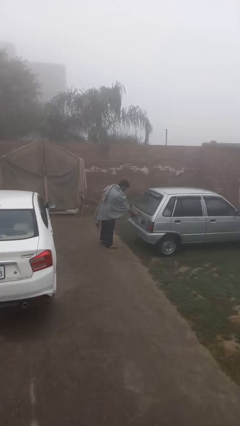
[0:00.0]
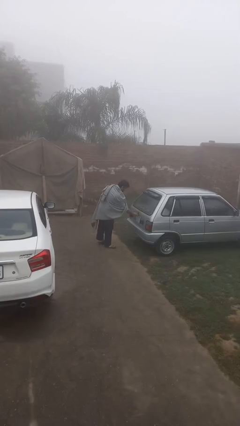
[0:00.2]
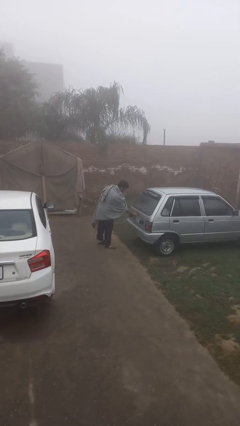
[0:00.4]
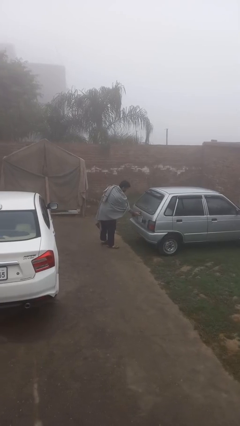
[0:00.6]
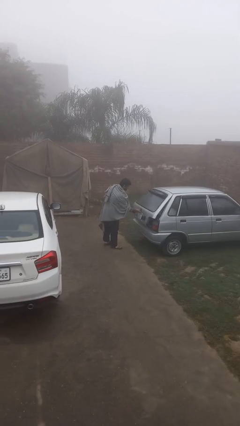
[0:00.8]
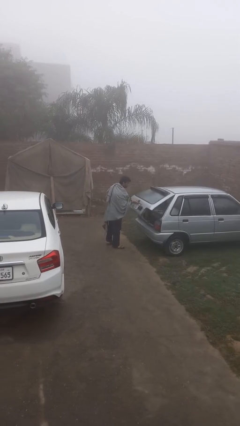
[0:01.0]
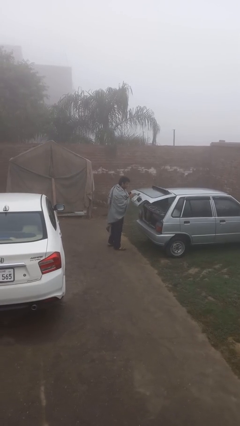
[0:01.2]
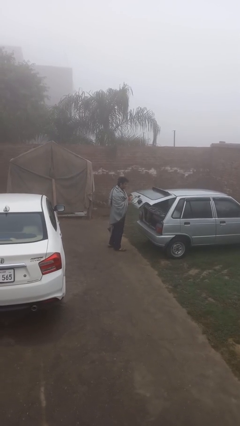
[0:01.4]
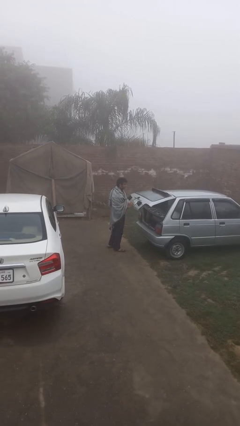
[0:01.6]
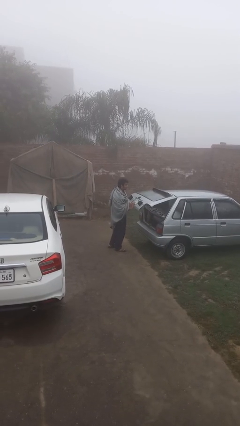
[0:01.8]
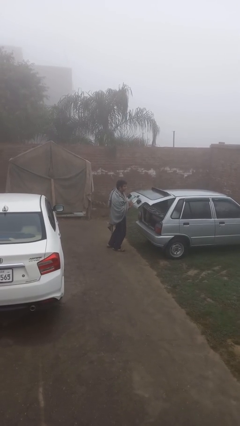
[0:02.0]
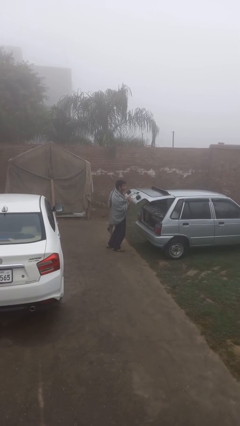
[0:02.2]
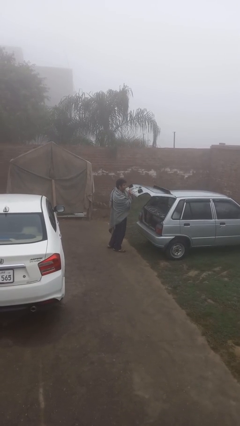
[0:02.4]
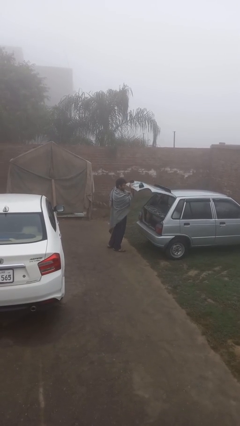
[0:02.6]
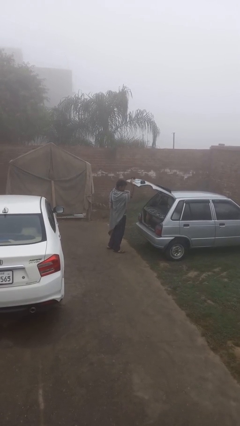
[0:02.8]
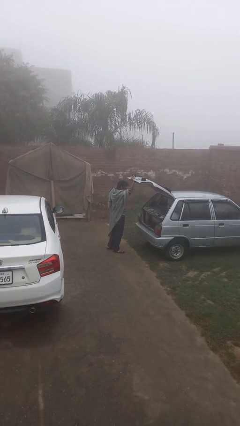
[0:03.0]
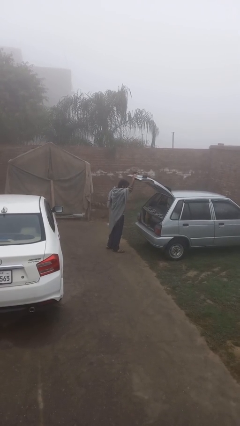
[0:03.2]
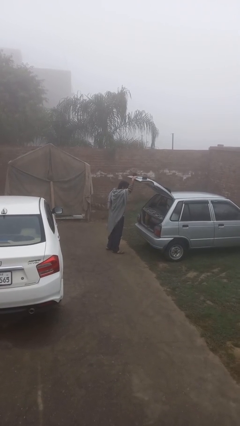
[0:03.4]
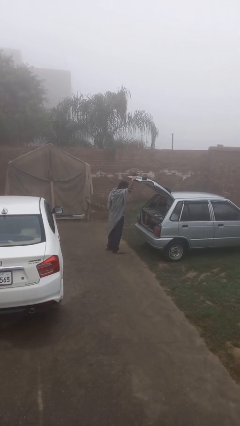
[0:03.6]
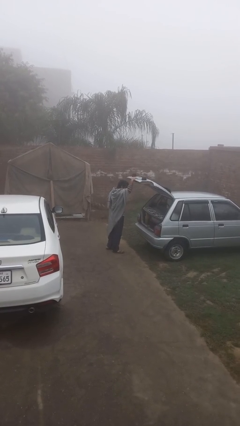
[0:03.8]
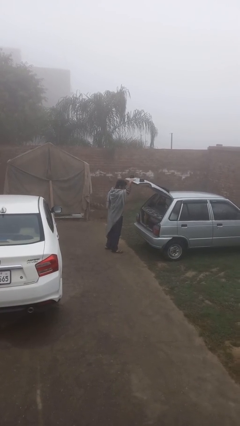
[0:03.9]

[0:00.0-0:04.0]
person opens car trunk

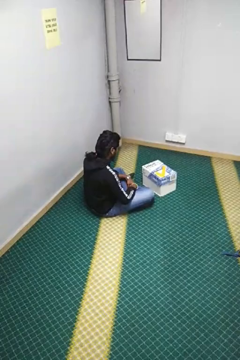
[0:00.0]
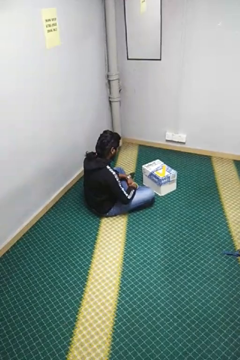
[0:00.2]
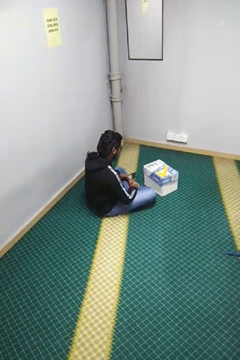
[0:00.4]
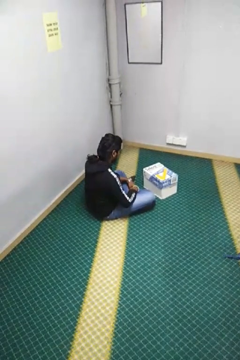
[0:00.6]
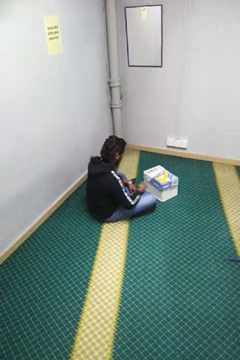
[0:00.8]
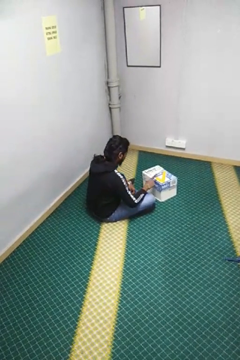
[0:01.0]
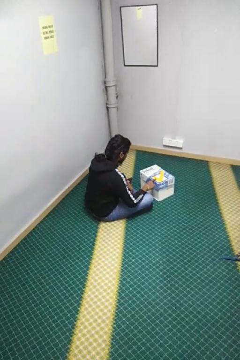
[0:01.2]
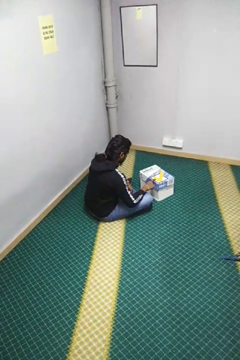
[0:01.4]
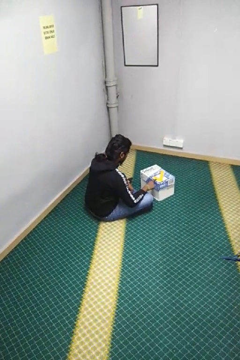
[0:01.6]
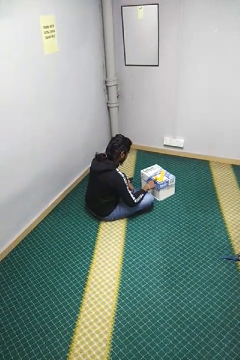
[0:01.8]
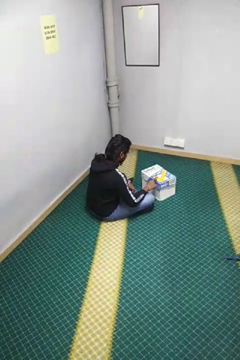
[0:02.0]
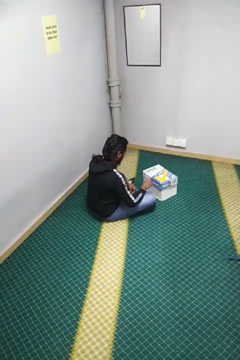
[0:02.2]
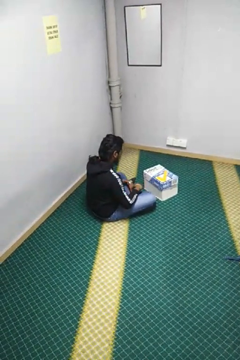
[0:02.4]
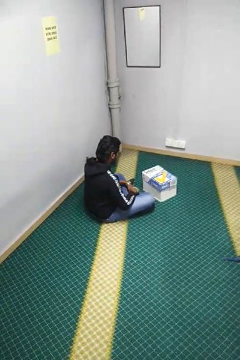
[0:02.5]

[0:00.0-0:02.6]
person taps object with finger

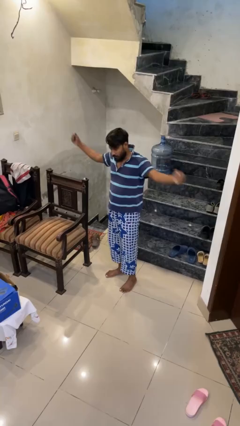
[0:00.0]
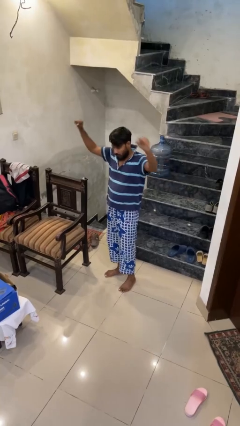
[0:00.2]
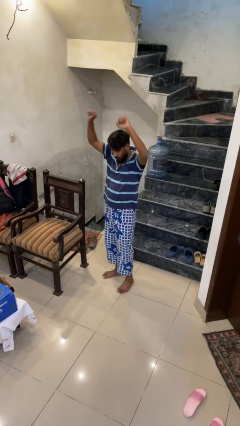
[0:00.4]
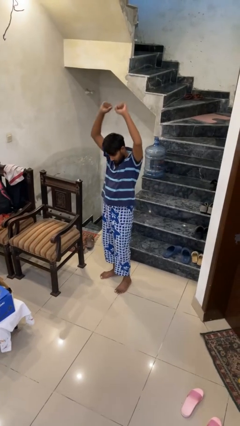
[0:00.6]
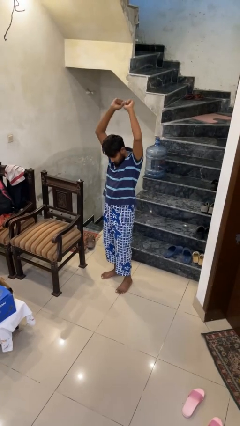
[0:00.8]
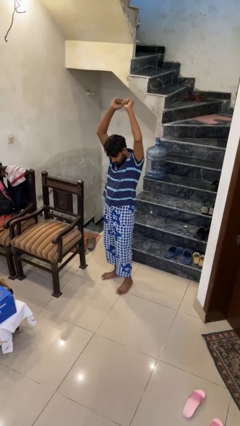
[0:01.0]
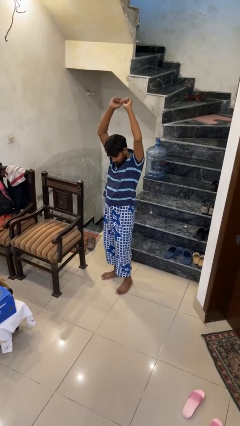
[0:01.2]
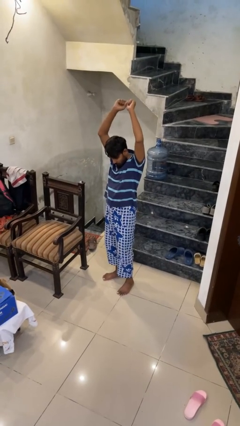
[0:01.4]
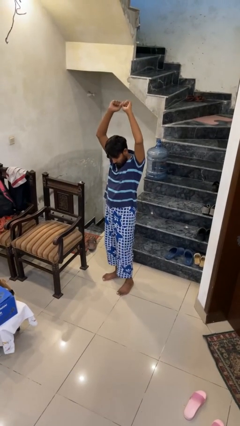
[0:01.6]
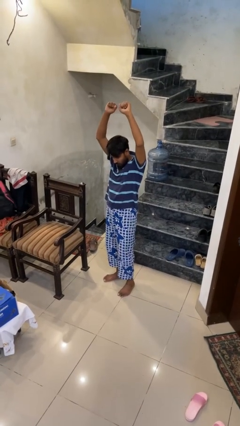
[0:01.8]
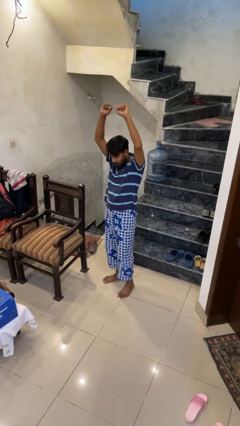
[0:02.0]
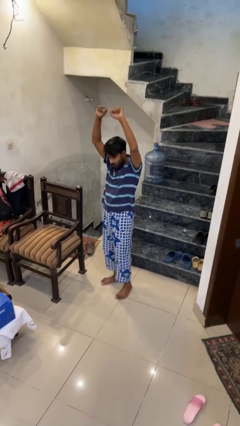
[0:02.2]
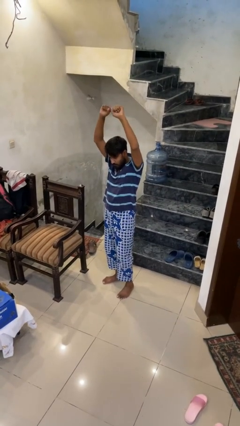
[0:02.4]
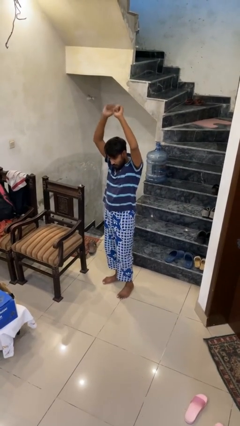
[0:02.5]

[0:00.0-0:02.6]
person stretches arms over head

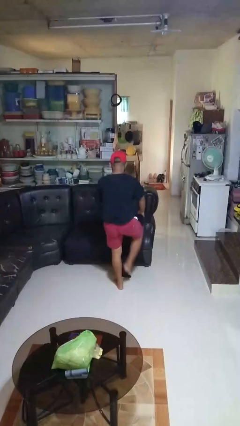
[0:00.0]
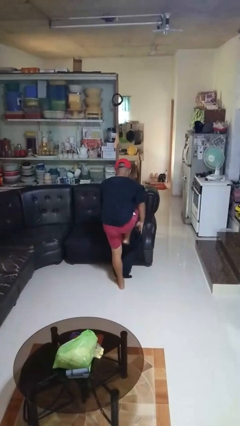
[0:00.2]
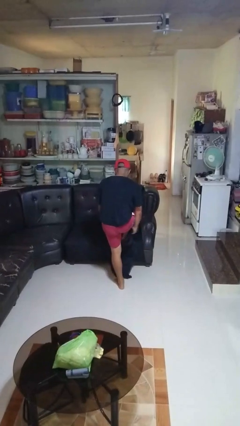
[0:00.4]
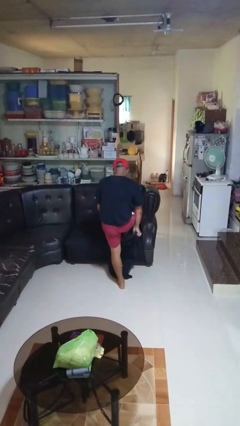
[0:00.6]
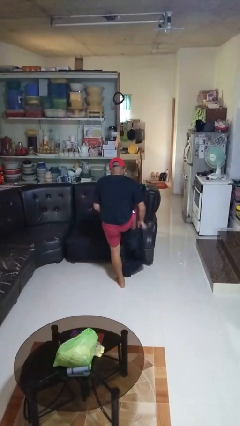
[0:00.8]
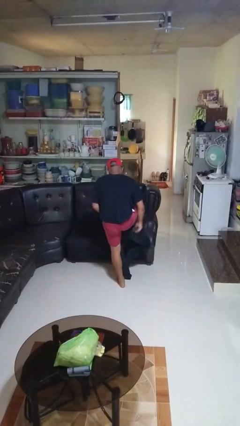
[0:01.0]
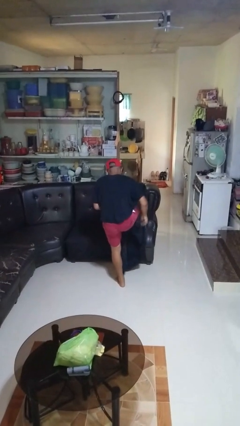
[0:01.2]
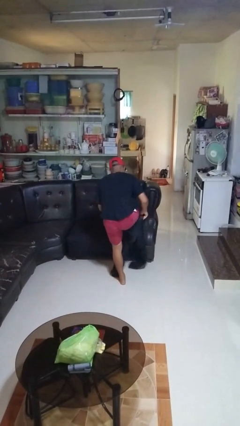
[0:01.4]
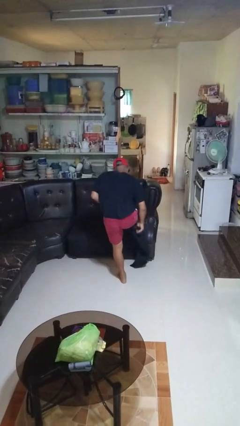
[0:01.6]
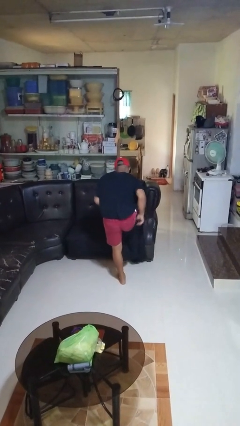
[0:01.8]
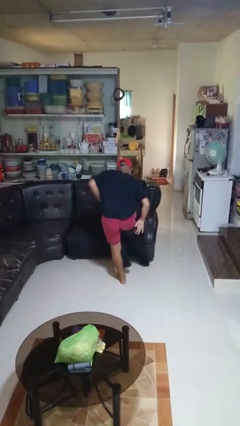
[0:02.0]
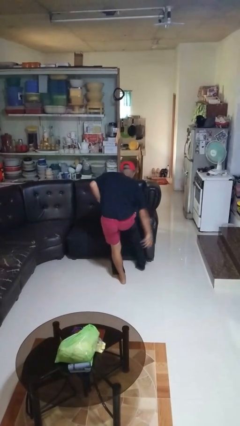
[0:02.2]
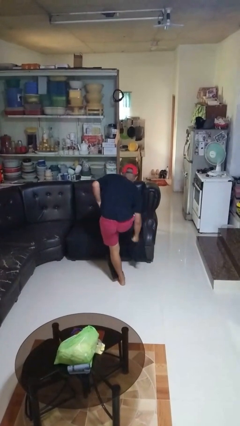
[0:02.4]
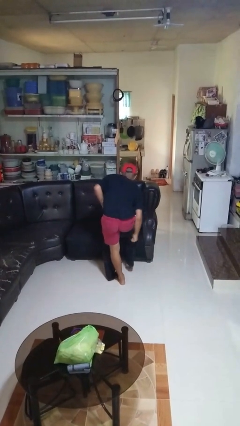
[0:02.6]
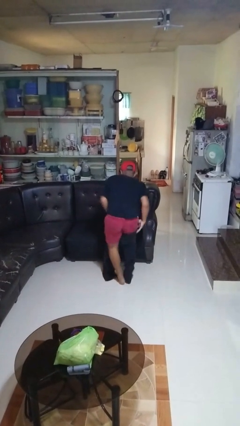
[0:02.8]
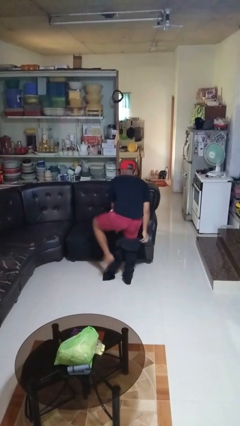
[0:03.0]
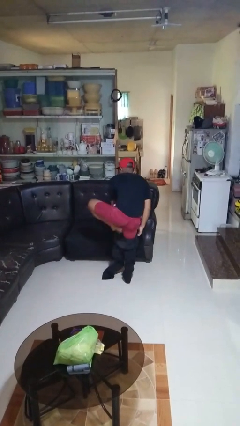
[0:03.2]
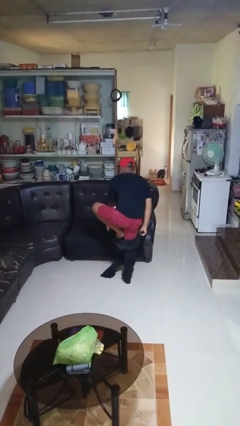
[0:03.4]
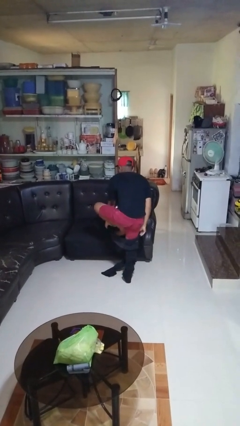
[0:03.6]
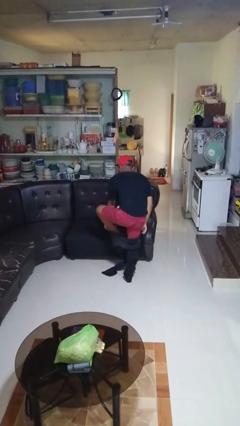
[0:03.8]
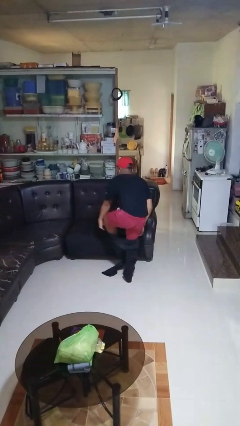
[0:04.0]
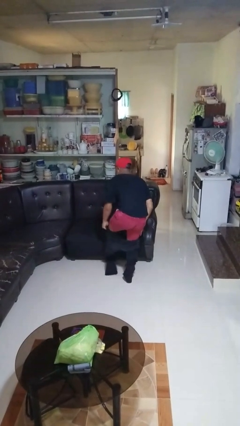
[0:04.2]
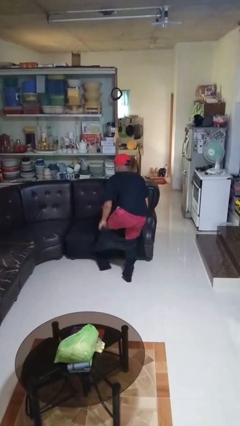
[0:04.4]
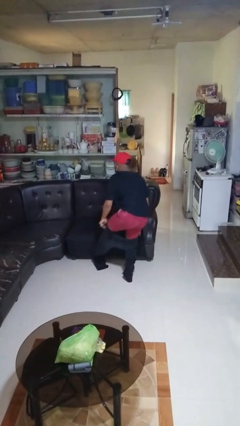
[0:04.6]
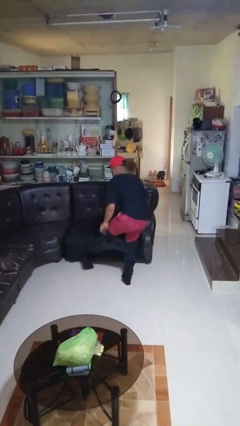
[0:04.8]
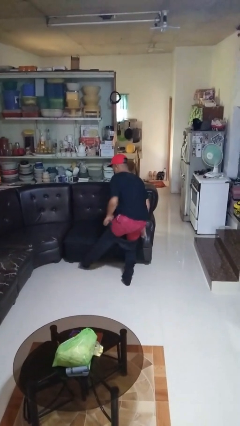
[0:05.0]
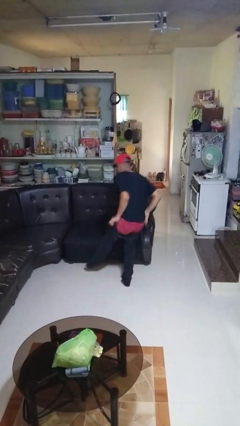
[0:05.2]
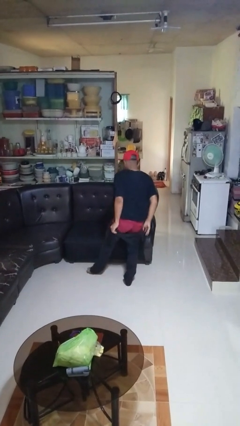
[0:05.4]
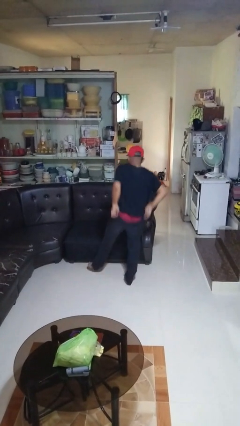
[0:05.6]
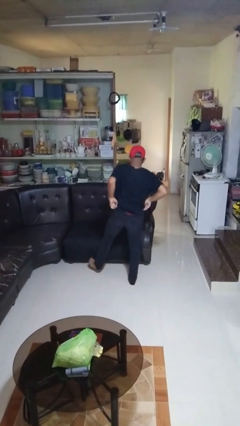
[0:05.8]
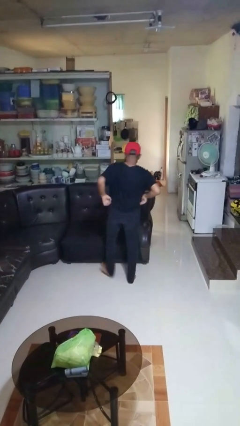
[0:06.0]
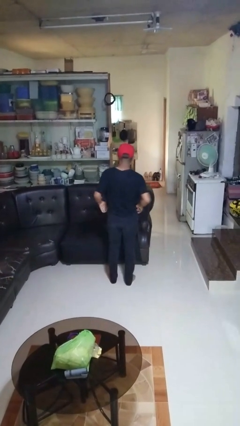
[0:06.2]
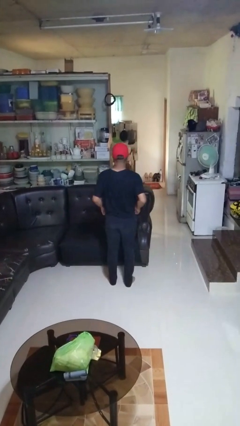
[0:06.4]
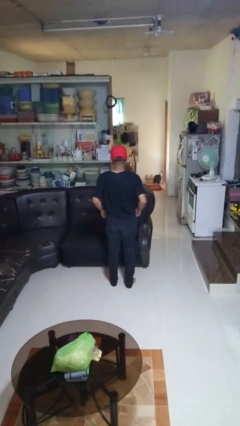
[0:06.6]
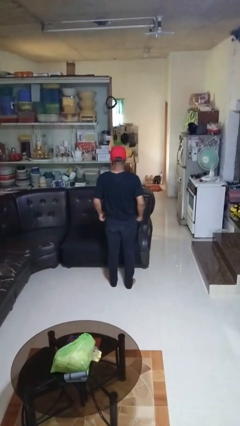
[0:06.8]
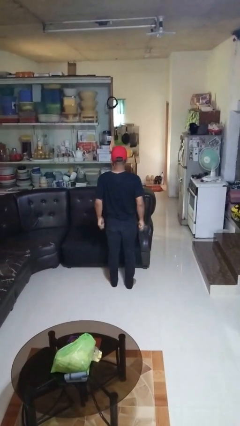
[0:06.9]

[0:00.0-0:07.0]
person puts on pants

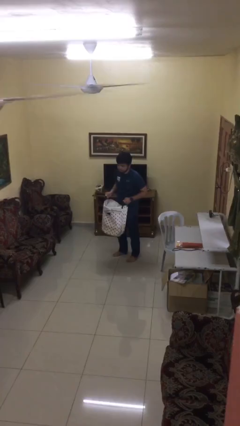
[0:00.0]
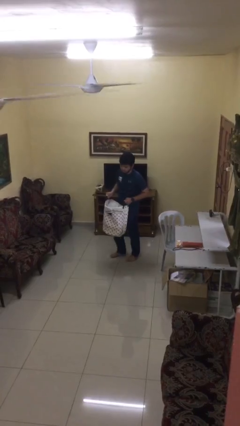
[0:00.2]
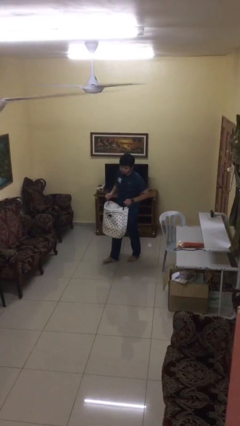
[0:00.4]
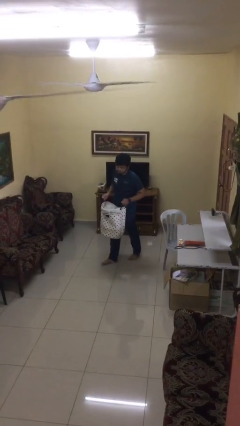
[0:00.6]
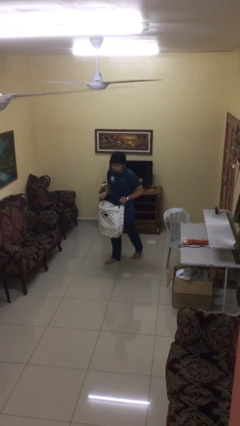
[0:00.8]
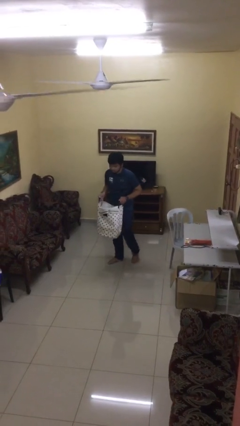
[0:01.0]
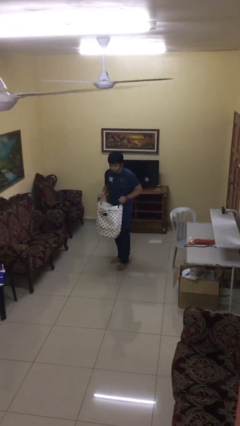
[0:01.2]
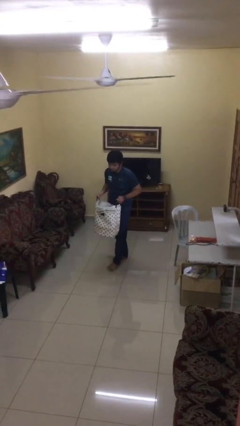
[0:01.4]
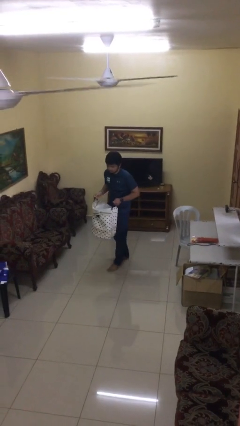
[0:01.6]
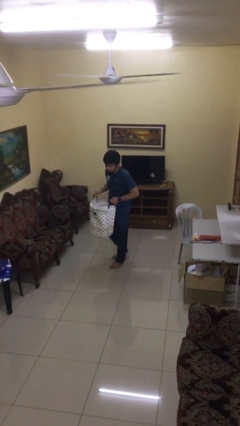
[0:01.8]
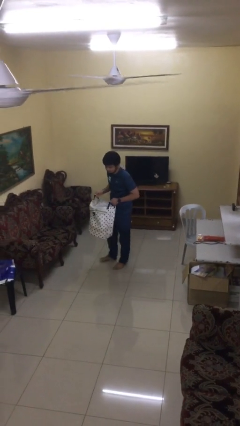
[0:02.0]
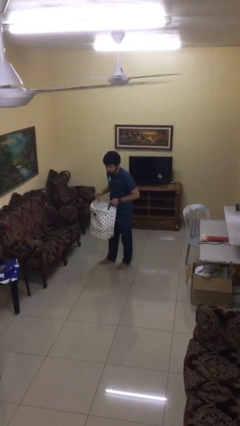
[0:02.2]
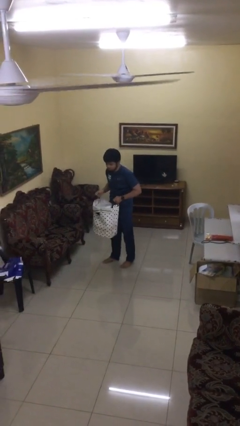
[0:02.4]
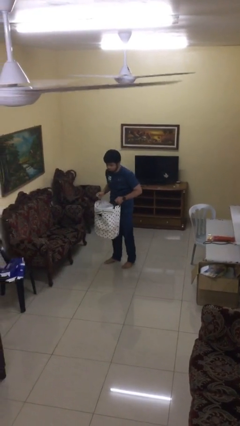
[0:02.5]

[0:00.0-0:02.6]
person carries laundry basket
